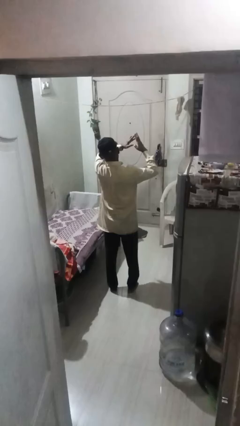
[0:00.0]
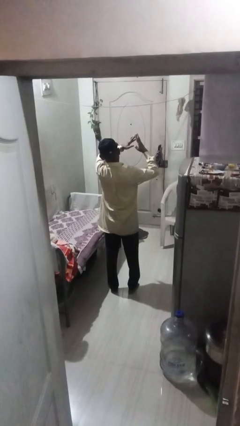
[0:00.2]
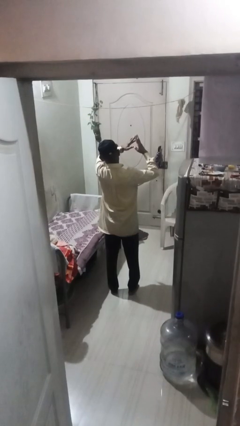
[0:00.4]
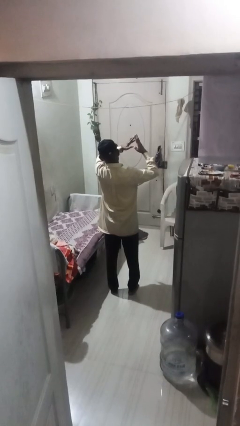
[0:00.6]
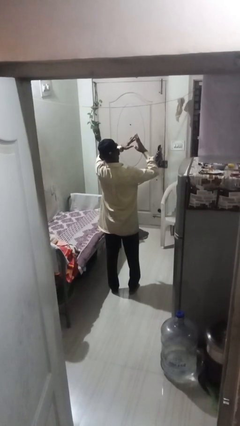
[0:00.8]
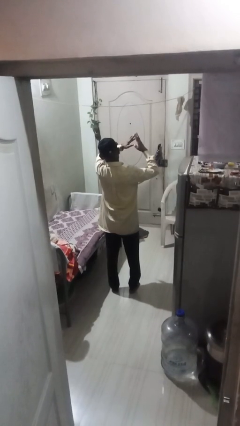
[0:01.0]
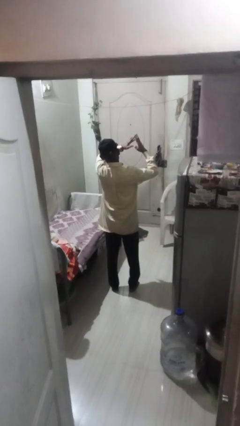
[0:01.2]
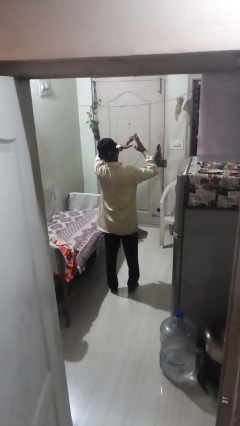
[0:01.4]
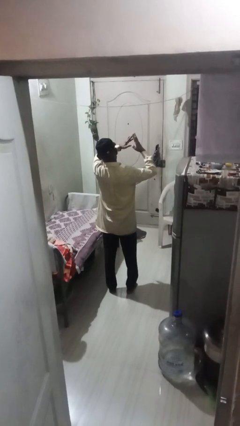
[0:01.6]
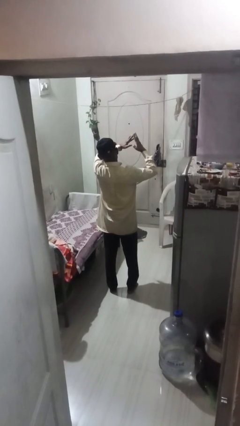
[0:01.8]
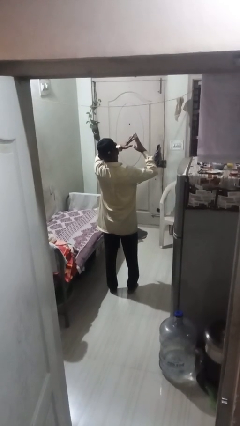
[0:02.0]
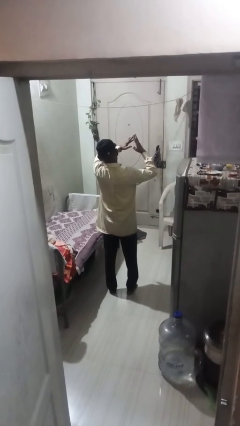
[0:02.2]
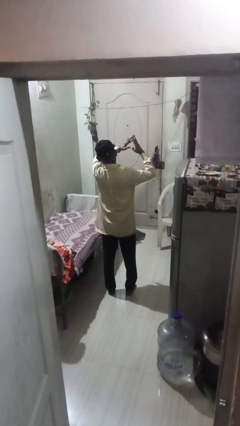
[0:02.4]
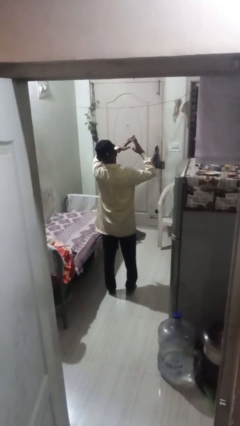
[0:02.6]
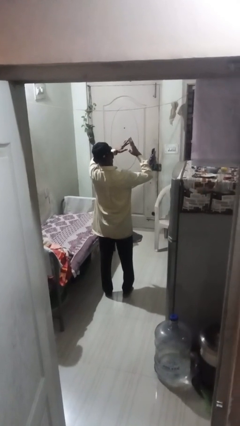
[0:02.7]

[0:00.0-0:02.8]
person gestures heart

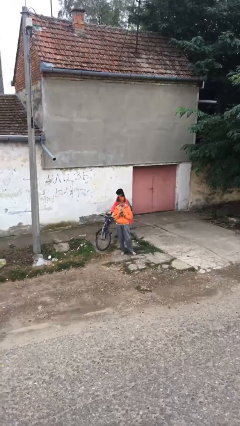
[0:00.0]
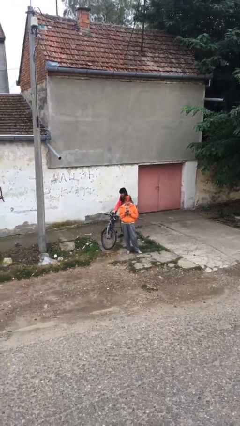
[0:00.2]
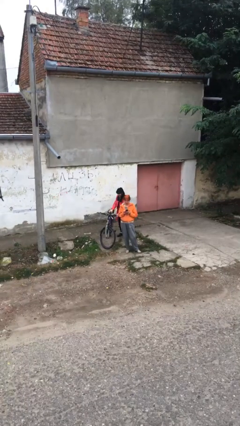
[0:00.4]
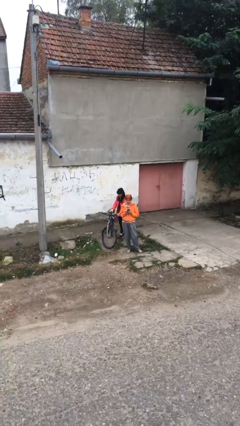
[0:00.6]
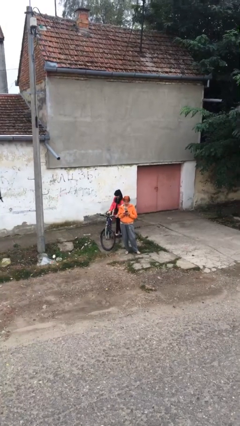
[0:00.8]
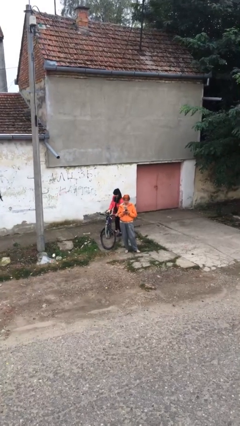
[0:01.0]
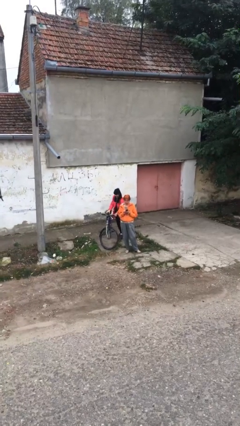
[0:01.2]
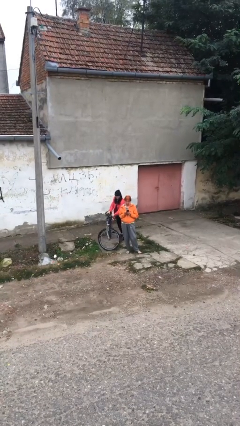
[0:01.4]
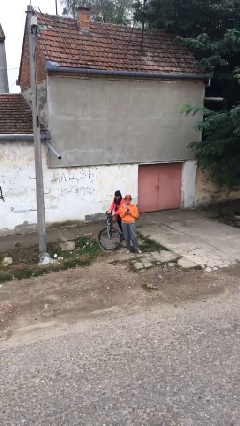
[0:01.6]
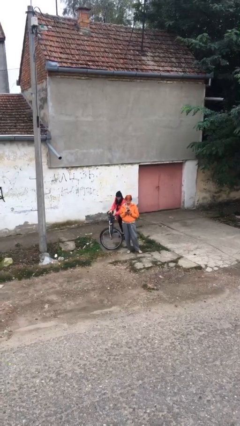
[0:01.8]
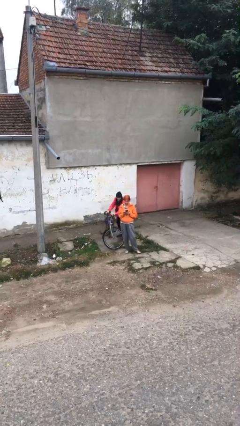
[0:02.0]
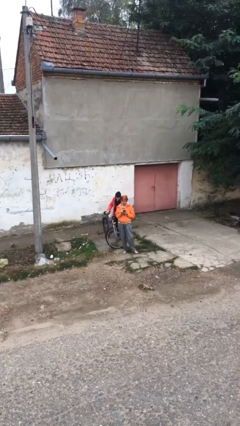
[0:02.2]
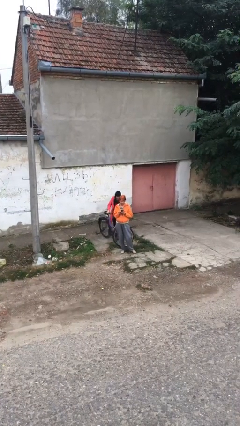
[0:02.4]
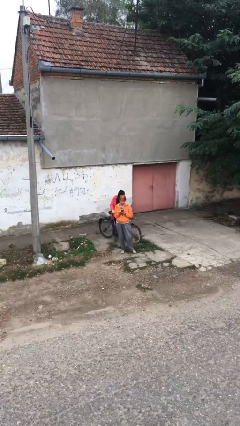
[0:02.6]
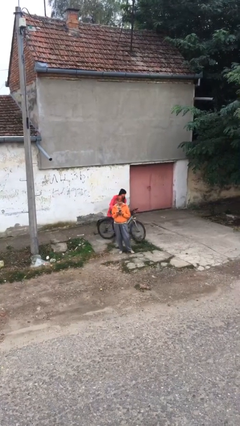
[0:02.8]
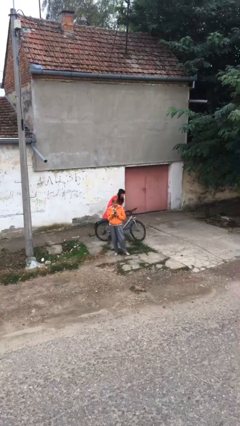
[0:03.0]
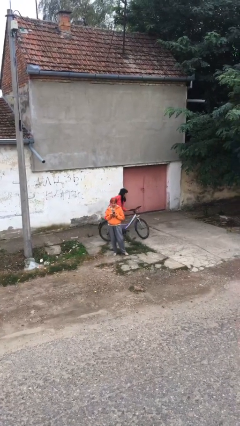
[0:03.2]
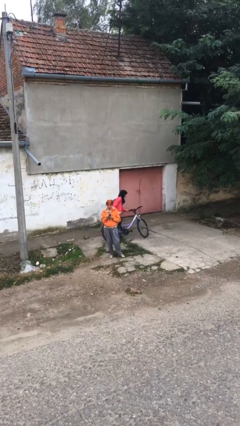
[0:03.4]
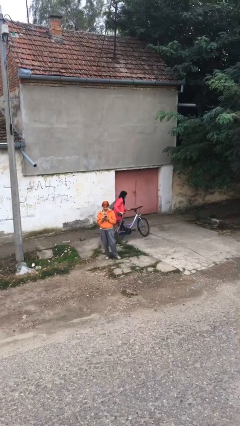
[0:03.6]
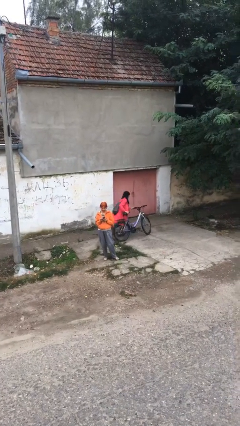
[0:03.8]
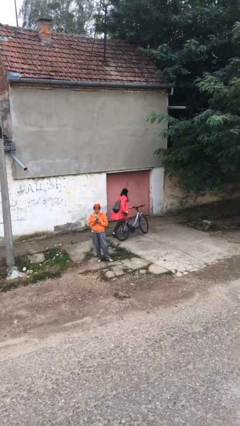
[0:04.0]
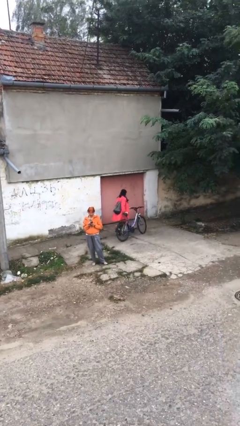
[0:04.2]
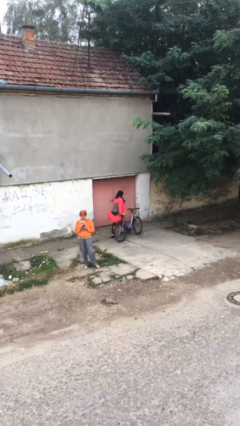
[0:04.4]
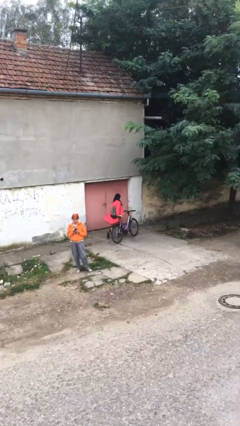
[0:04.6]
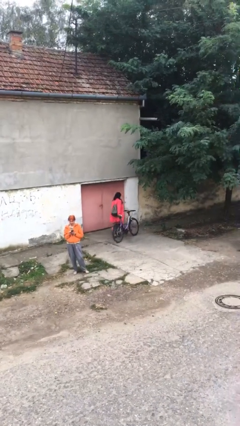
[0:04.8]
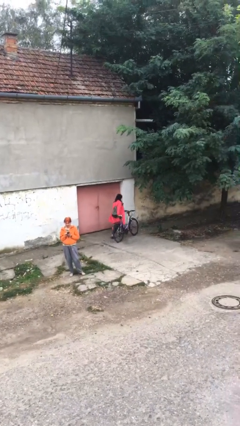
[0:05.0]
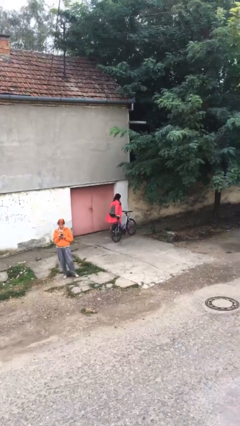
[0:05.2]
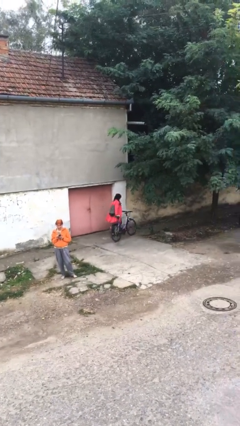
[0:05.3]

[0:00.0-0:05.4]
person steals object from person

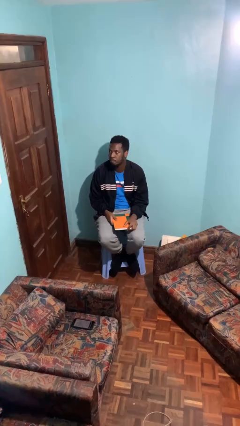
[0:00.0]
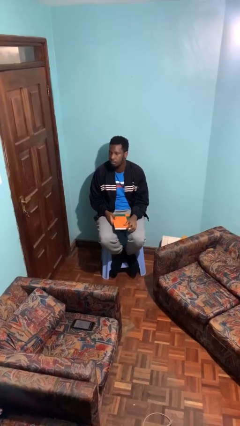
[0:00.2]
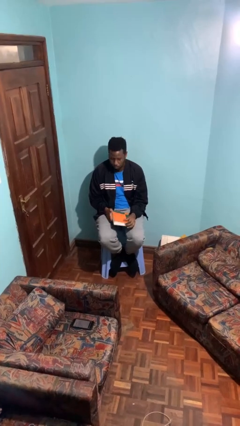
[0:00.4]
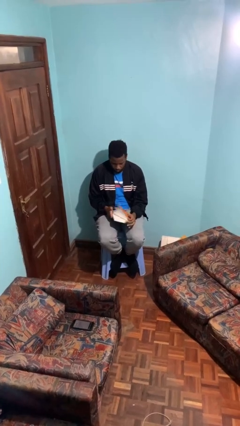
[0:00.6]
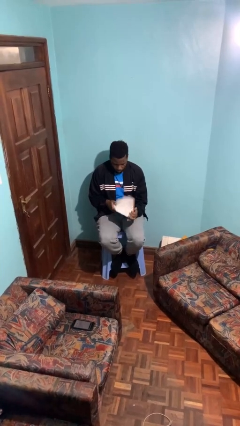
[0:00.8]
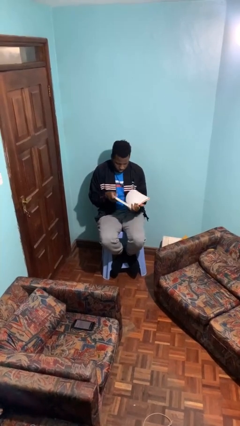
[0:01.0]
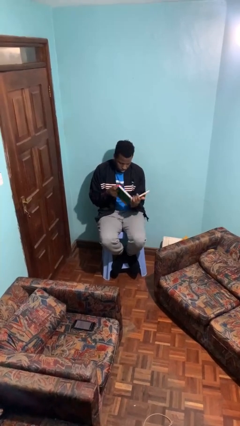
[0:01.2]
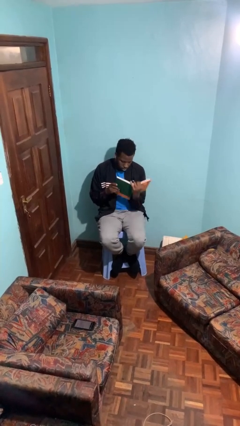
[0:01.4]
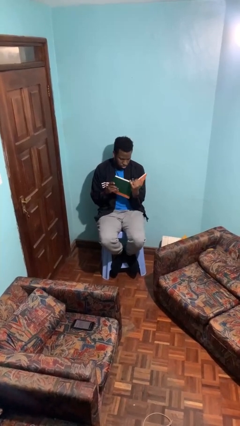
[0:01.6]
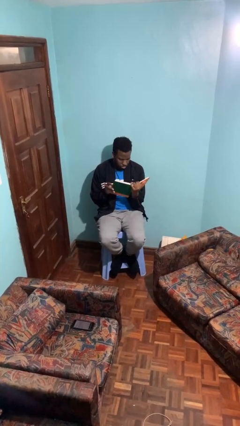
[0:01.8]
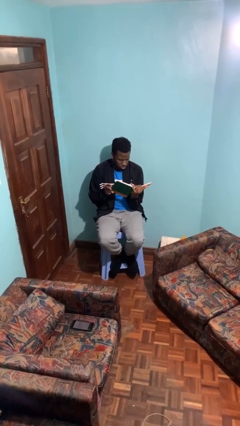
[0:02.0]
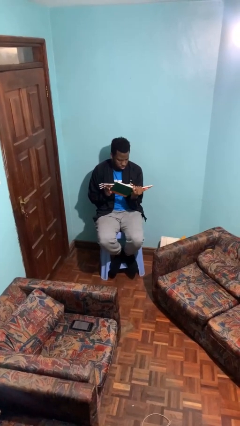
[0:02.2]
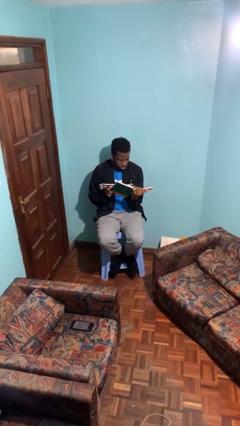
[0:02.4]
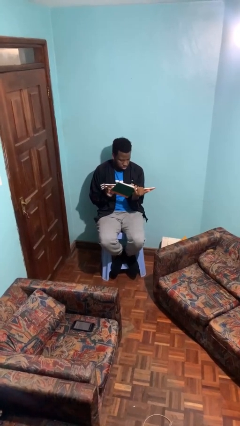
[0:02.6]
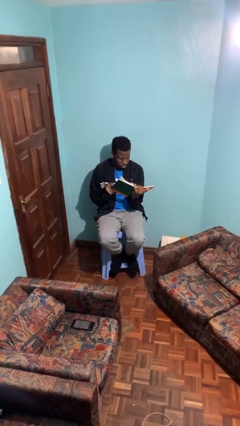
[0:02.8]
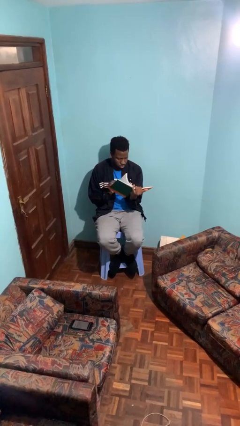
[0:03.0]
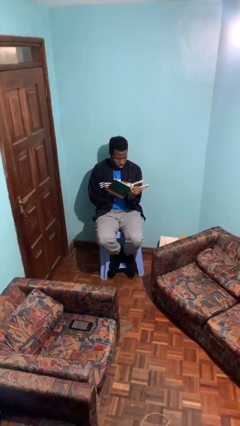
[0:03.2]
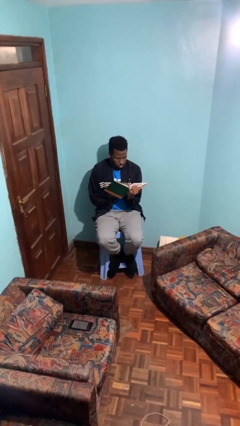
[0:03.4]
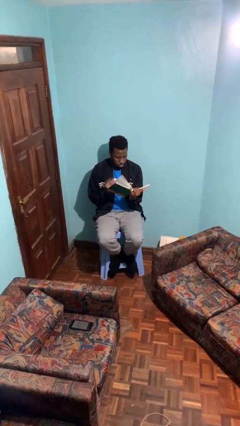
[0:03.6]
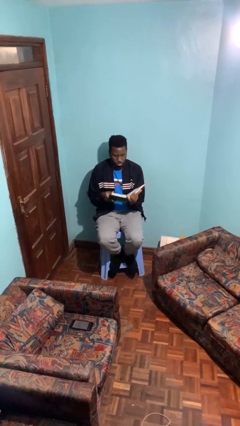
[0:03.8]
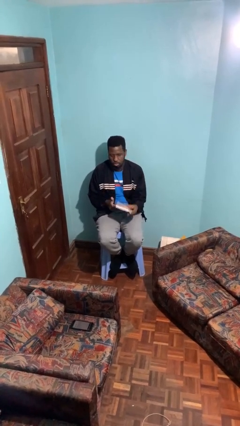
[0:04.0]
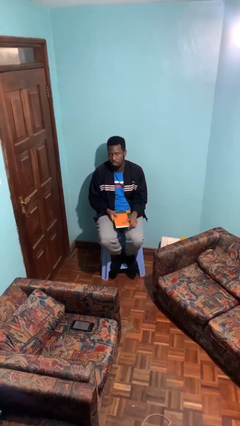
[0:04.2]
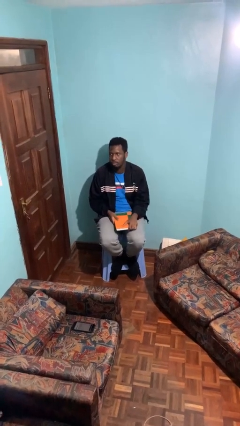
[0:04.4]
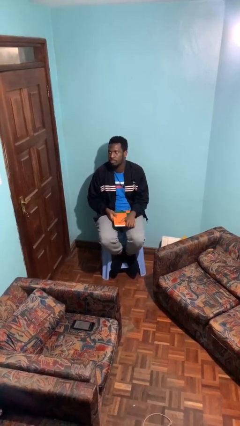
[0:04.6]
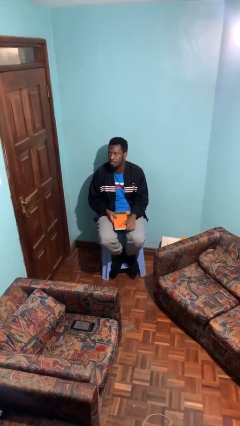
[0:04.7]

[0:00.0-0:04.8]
person reads book

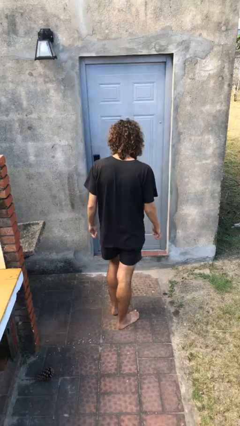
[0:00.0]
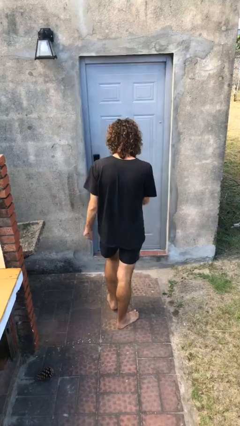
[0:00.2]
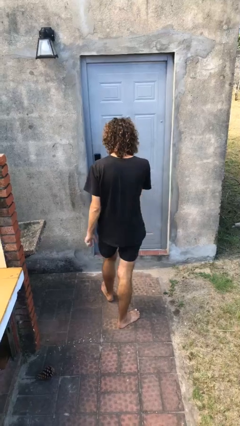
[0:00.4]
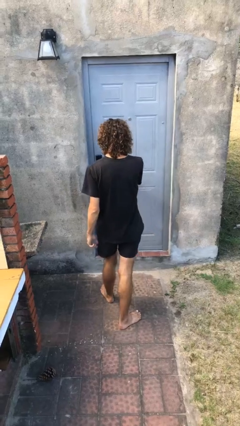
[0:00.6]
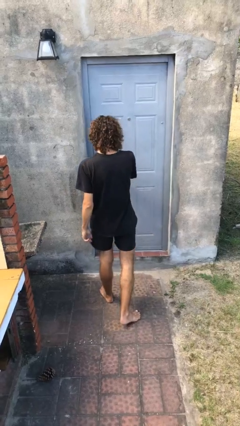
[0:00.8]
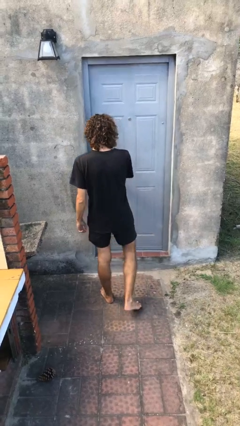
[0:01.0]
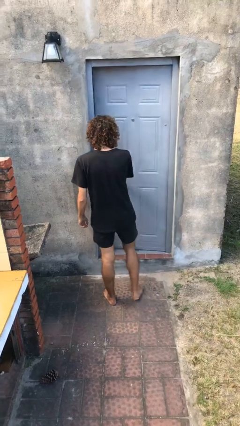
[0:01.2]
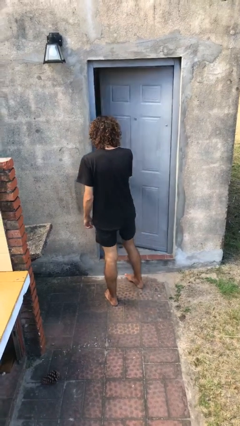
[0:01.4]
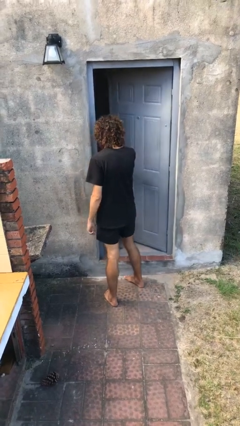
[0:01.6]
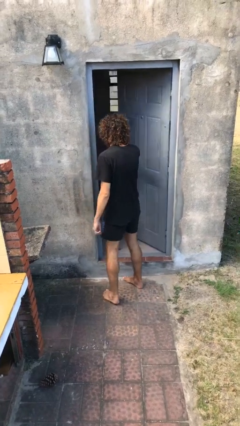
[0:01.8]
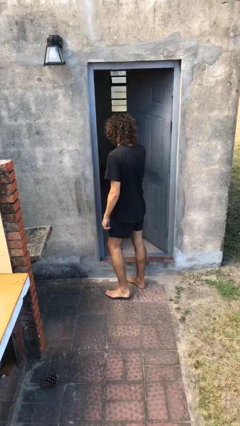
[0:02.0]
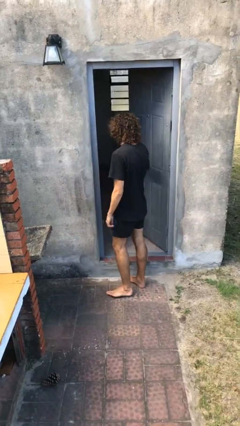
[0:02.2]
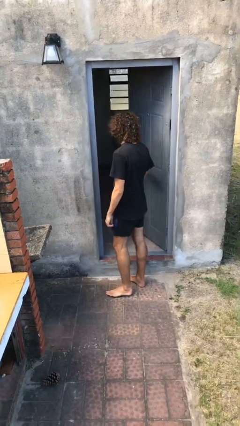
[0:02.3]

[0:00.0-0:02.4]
person opens facility door

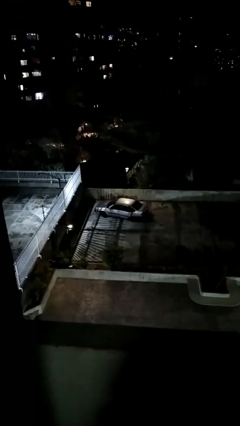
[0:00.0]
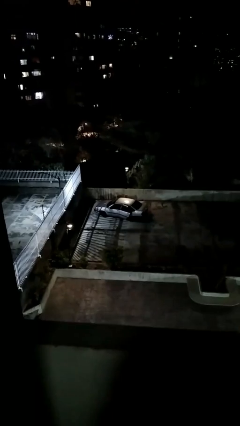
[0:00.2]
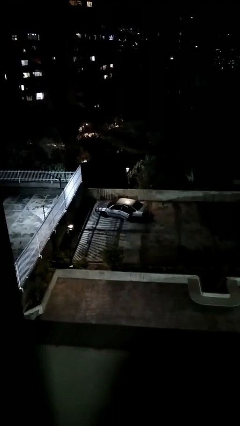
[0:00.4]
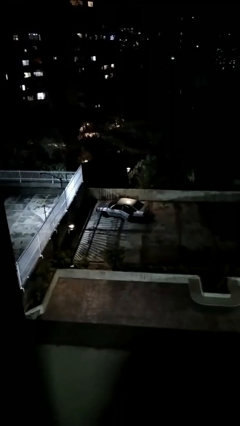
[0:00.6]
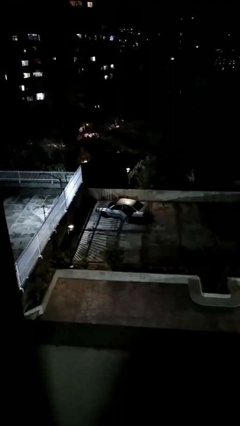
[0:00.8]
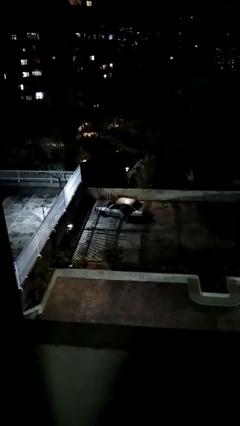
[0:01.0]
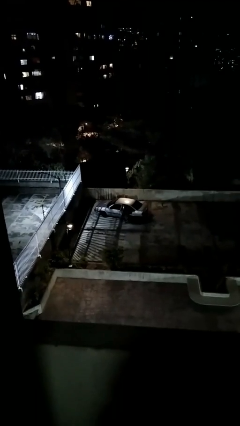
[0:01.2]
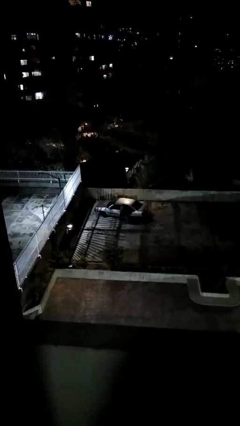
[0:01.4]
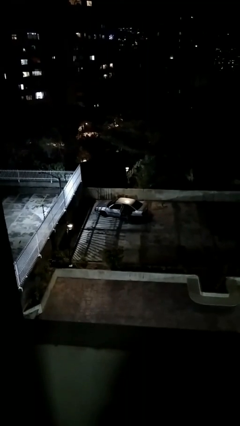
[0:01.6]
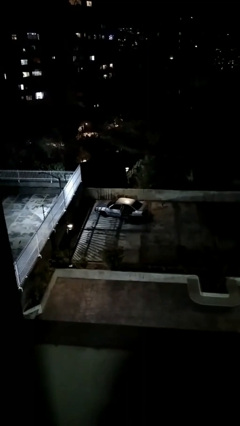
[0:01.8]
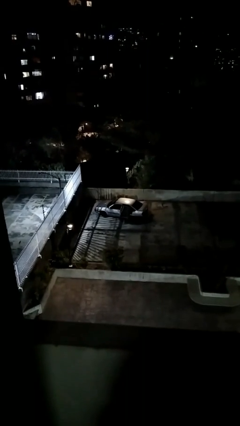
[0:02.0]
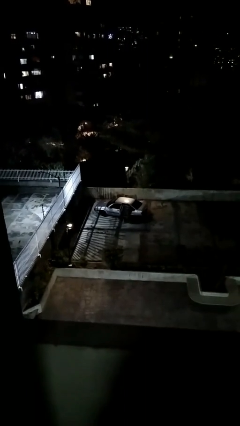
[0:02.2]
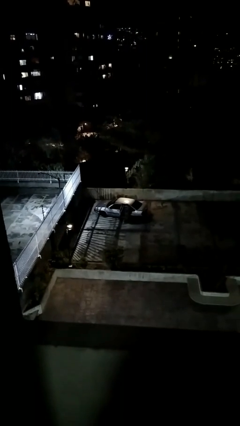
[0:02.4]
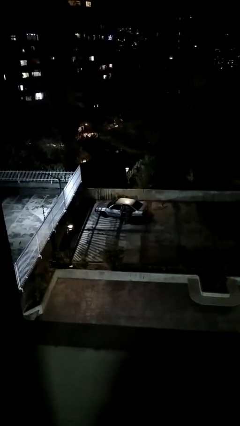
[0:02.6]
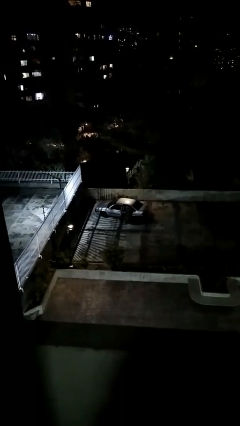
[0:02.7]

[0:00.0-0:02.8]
car drops off person
